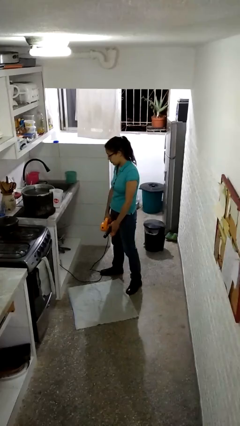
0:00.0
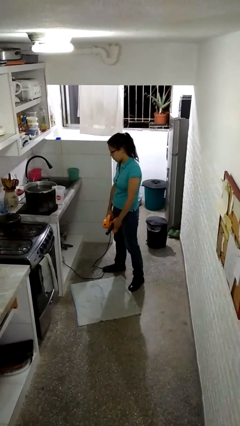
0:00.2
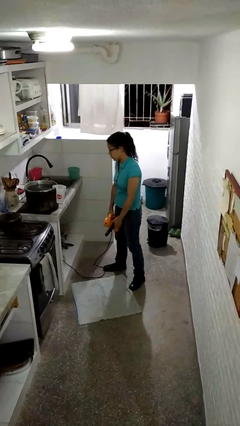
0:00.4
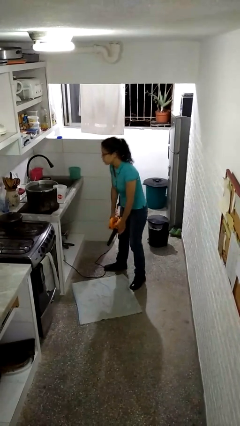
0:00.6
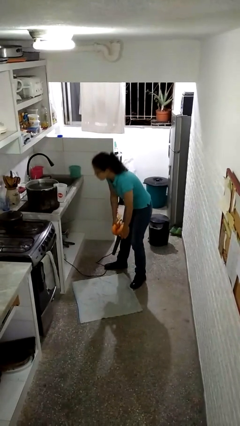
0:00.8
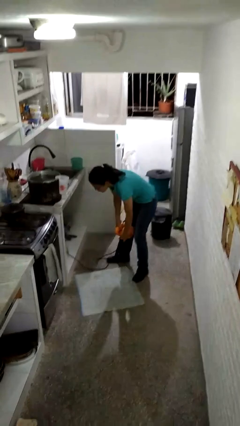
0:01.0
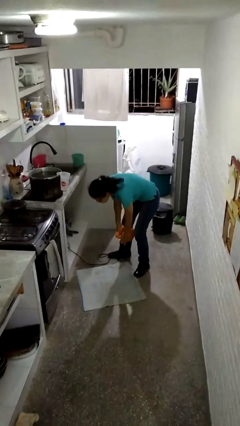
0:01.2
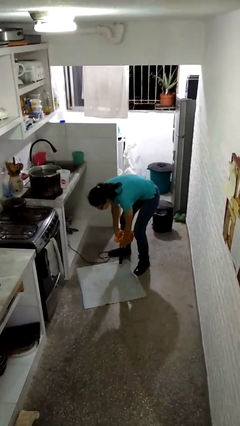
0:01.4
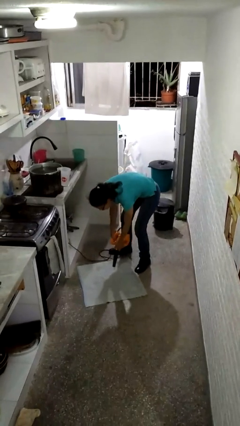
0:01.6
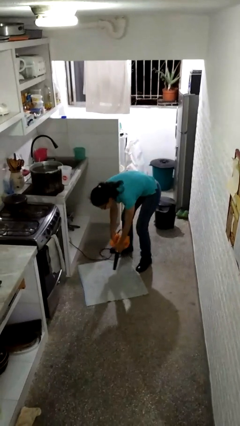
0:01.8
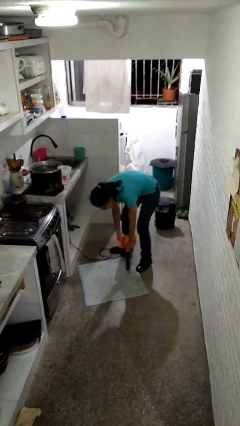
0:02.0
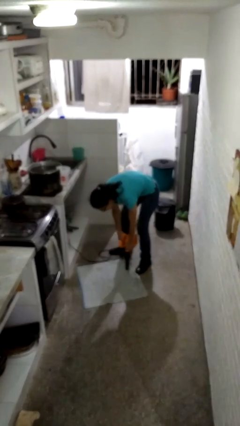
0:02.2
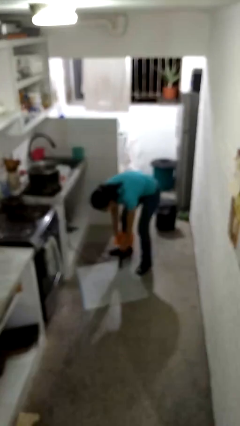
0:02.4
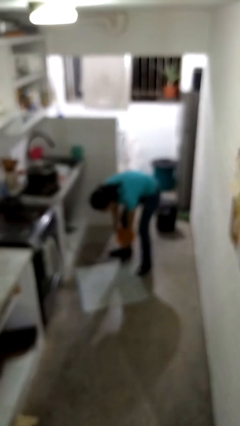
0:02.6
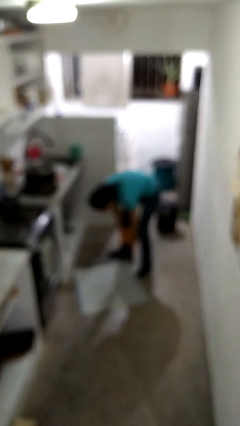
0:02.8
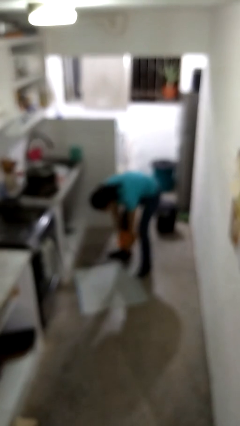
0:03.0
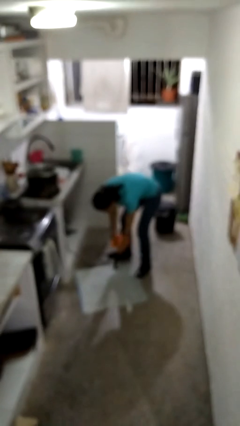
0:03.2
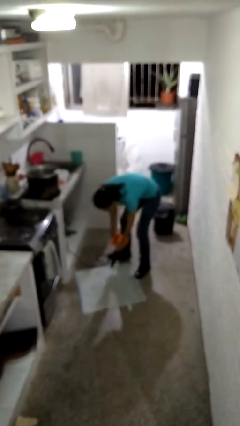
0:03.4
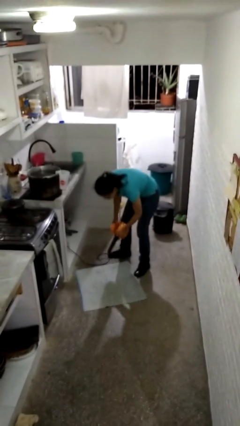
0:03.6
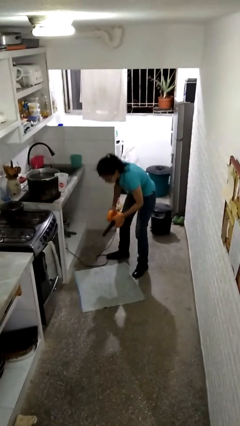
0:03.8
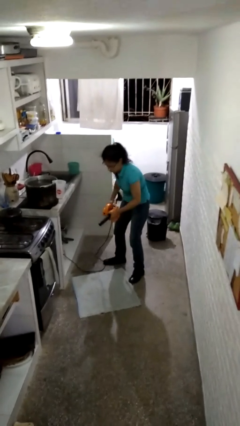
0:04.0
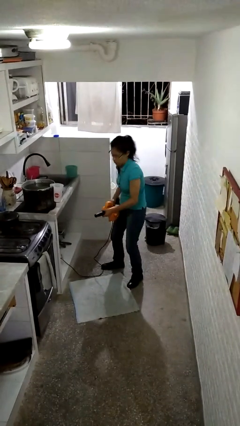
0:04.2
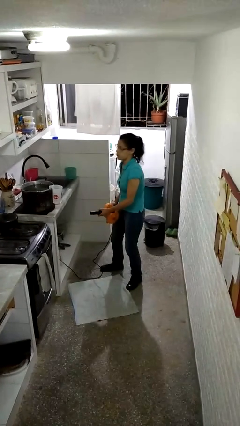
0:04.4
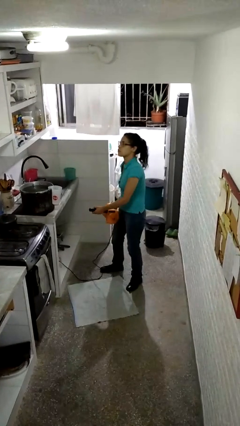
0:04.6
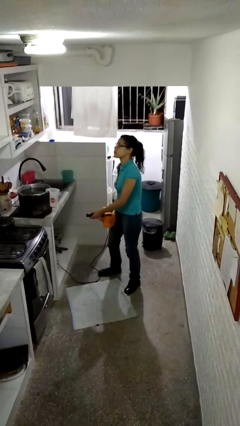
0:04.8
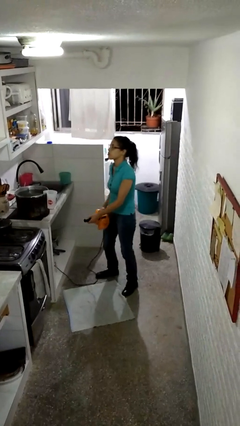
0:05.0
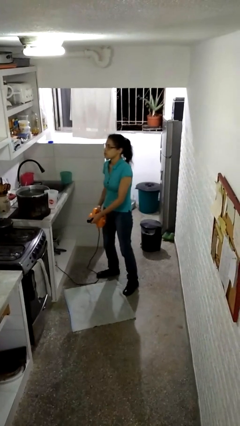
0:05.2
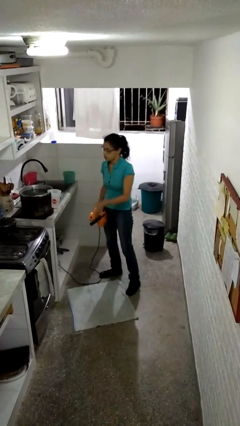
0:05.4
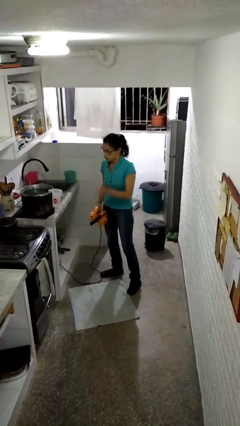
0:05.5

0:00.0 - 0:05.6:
person vacuums carpet

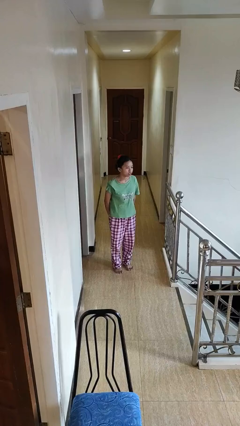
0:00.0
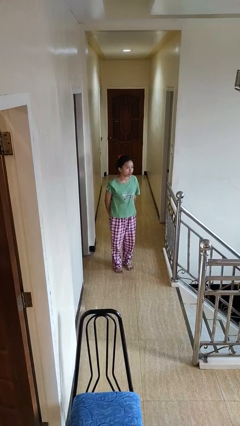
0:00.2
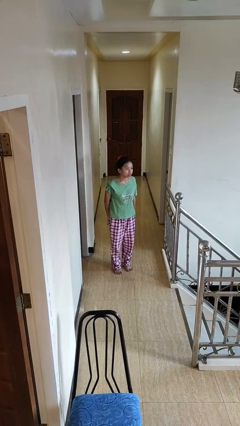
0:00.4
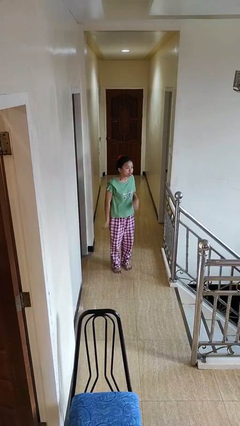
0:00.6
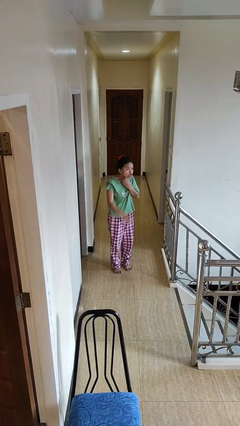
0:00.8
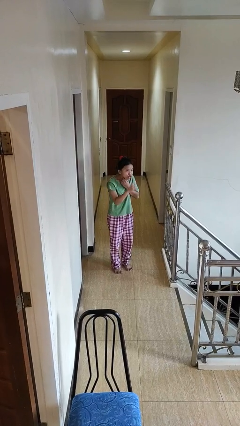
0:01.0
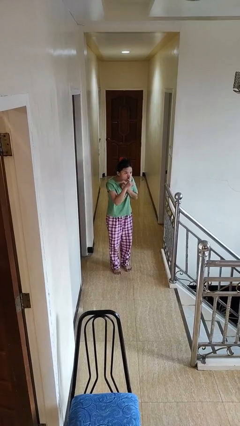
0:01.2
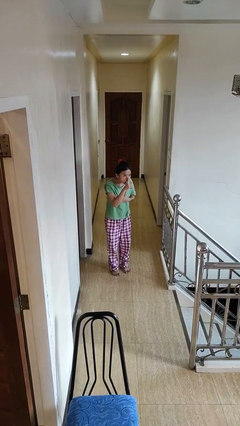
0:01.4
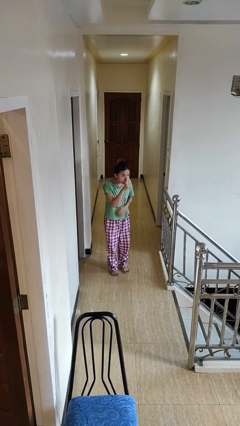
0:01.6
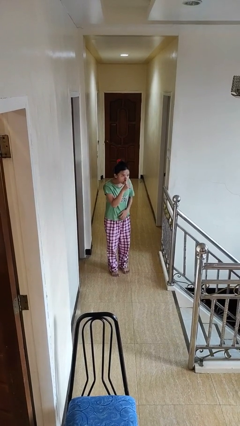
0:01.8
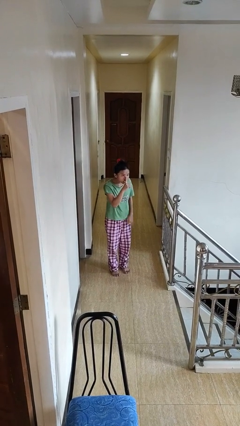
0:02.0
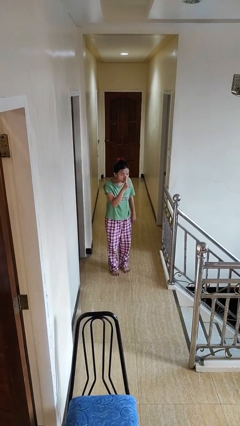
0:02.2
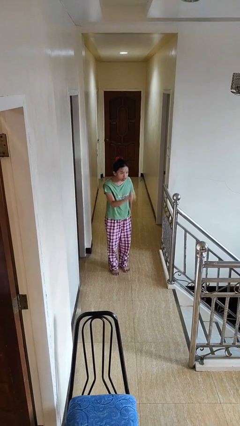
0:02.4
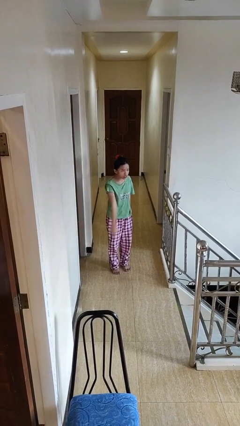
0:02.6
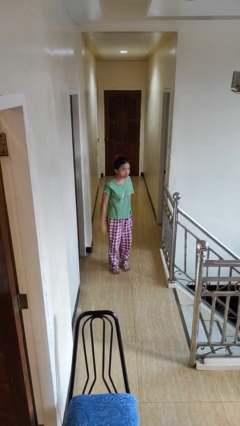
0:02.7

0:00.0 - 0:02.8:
person gestures be quiet

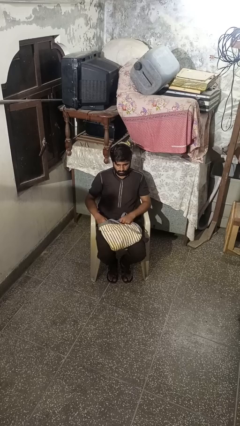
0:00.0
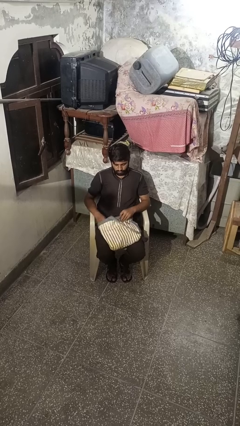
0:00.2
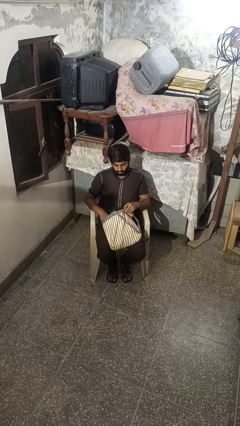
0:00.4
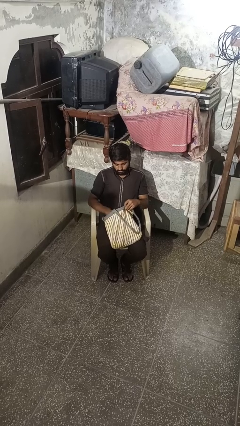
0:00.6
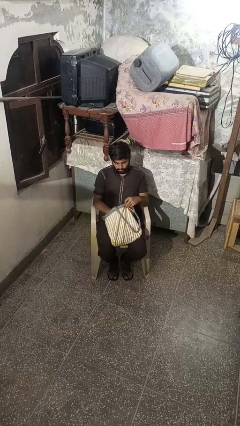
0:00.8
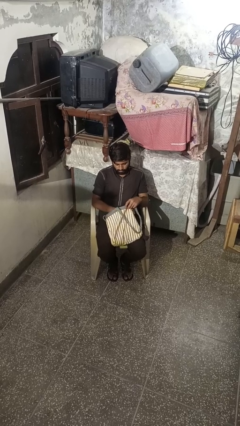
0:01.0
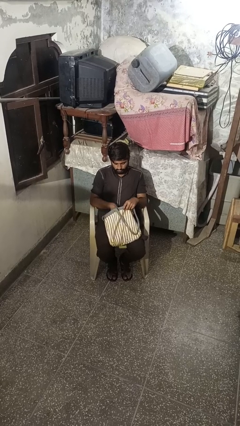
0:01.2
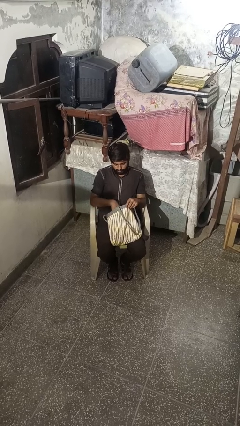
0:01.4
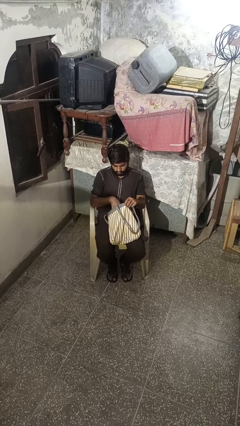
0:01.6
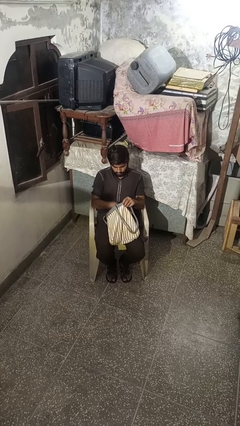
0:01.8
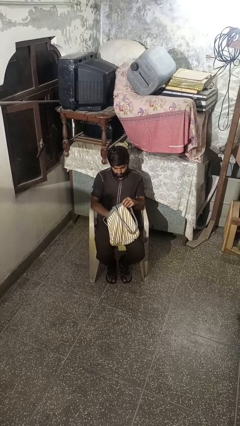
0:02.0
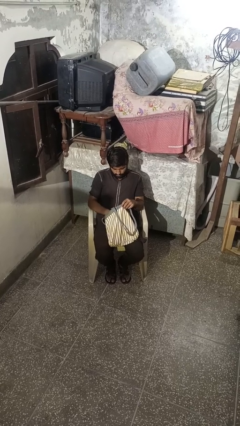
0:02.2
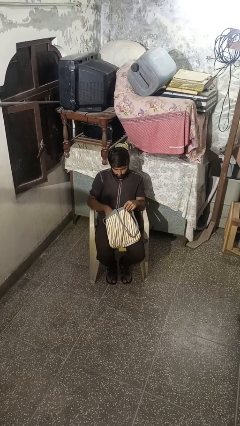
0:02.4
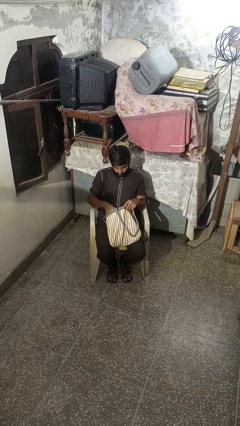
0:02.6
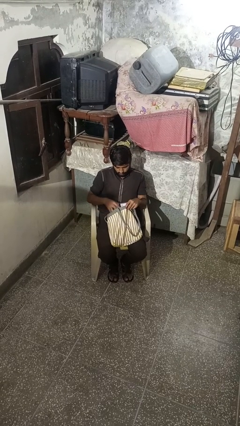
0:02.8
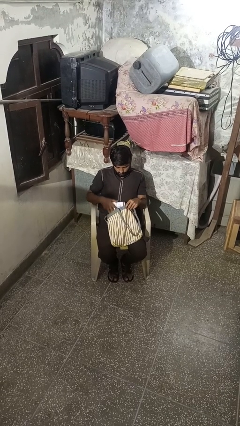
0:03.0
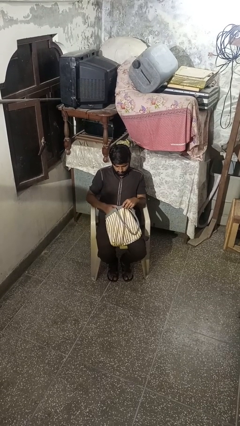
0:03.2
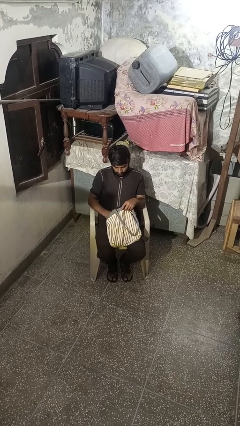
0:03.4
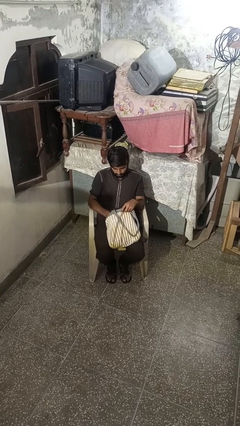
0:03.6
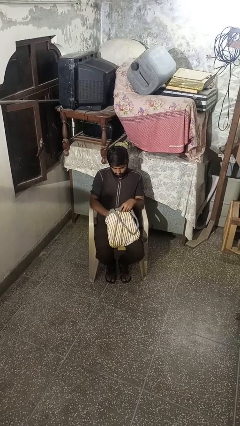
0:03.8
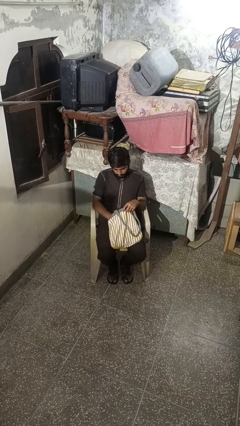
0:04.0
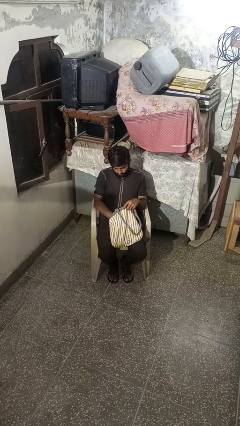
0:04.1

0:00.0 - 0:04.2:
person searches in backpack

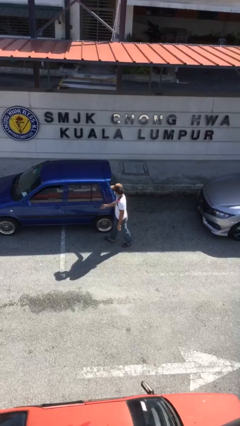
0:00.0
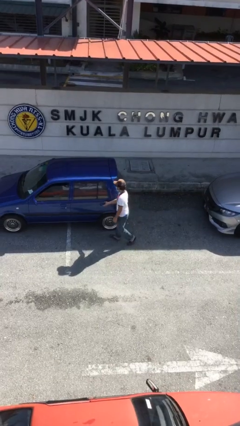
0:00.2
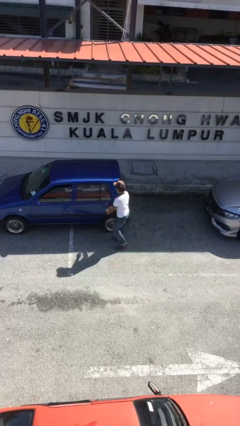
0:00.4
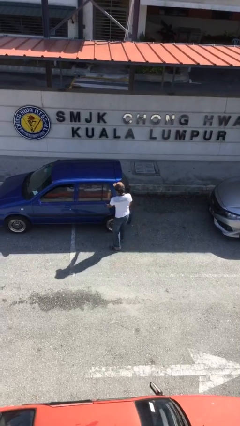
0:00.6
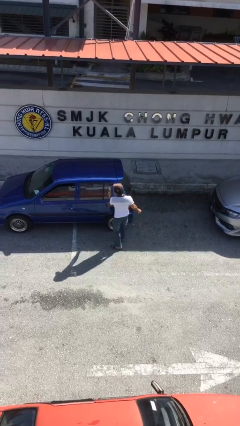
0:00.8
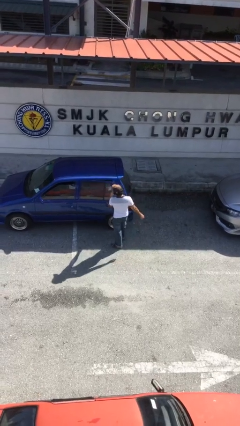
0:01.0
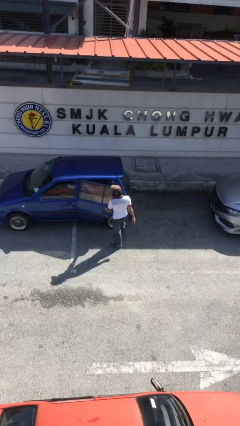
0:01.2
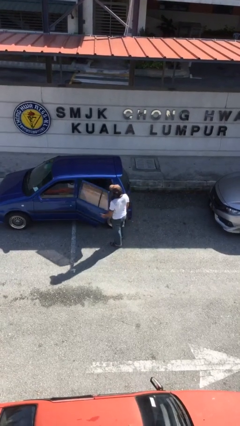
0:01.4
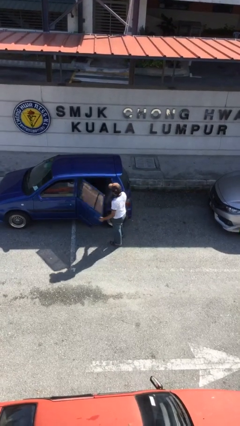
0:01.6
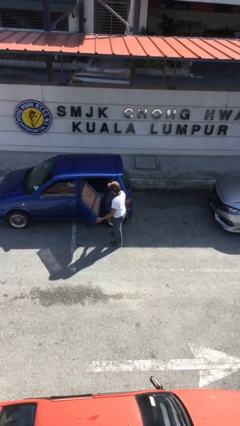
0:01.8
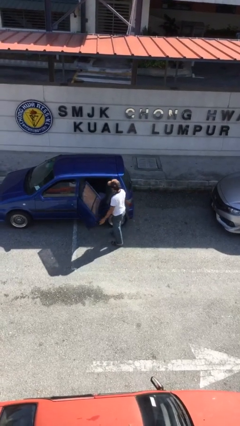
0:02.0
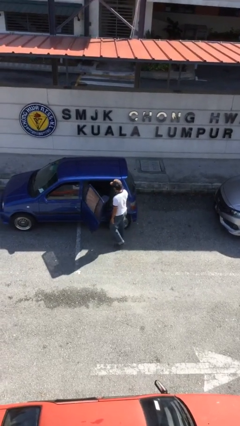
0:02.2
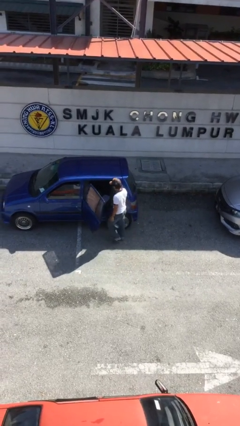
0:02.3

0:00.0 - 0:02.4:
person opens car door

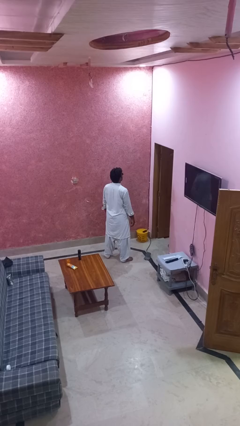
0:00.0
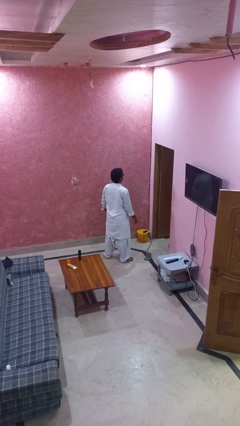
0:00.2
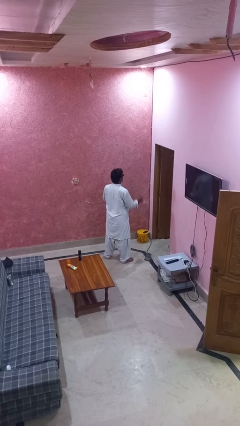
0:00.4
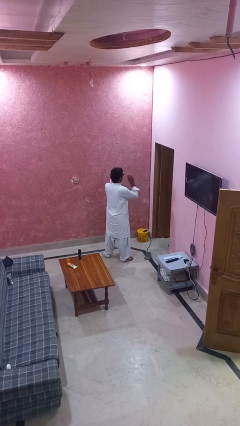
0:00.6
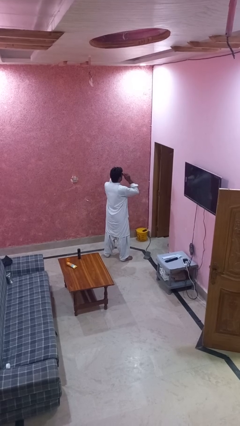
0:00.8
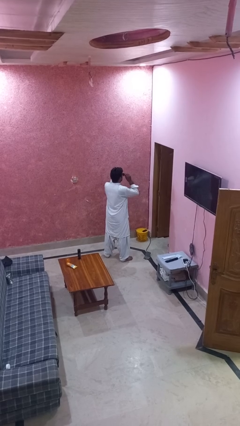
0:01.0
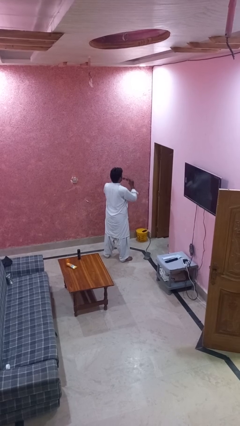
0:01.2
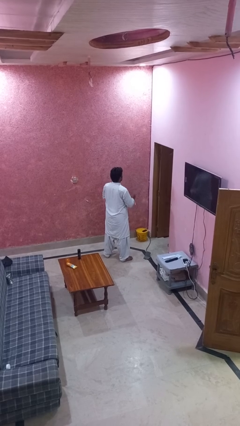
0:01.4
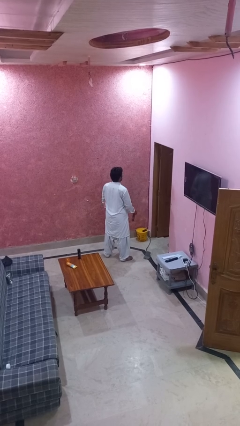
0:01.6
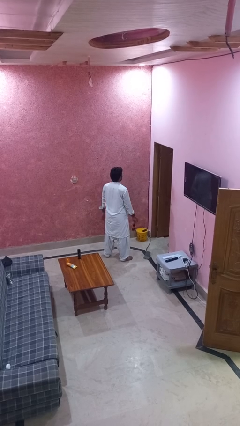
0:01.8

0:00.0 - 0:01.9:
person takes off sunglasses

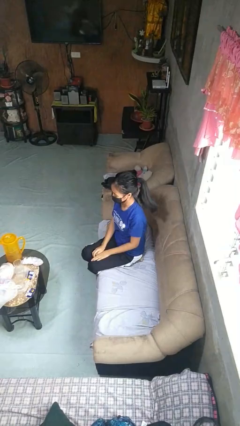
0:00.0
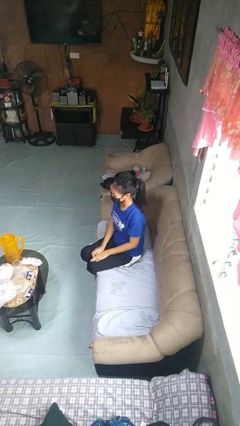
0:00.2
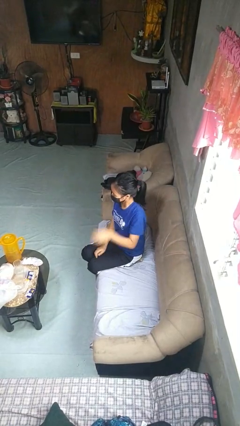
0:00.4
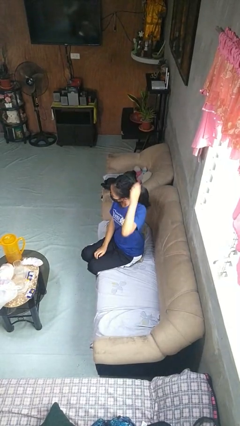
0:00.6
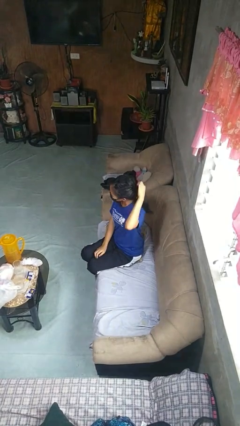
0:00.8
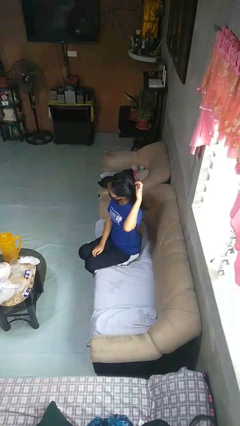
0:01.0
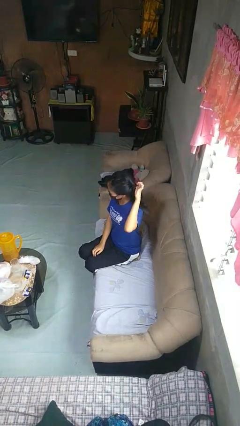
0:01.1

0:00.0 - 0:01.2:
person takes off hairtie
